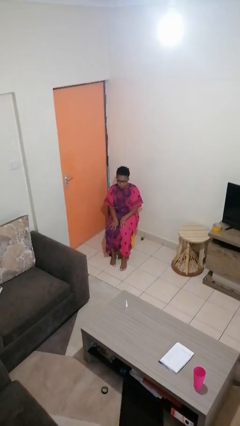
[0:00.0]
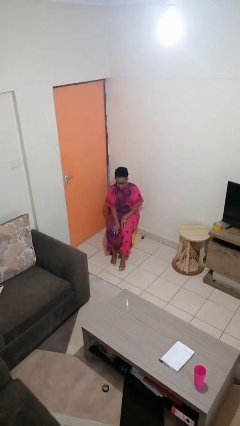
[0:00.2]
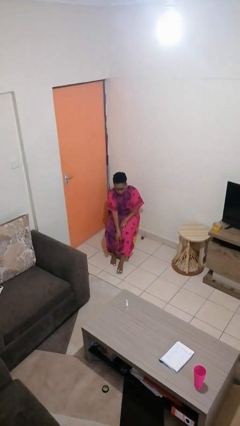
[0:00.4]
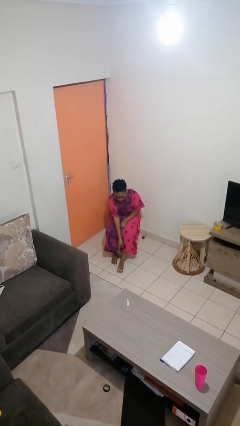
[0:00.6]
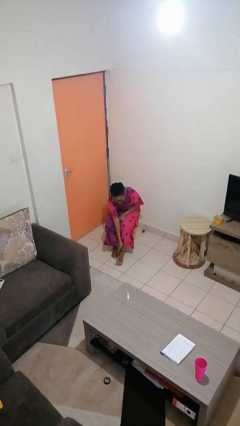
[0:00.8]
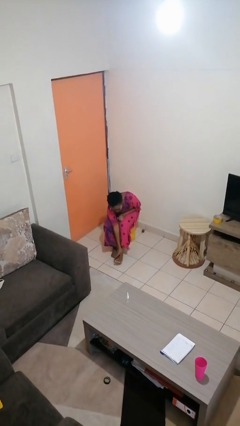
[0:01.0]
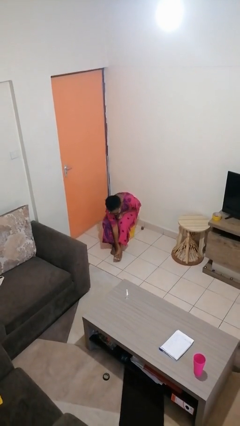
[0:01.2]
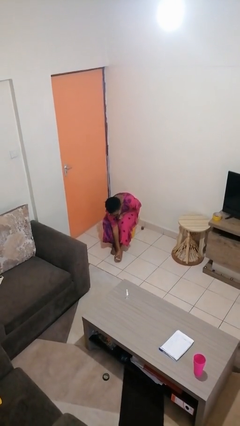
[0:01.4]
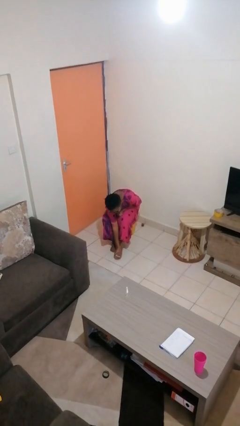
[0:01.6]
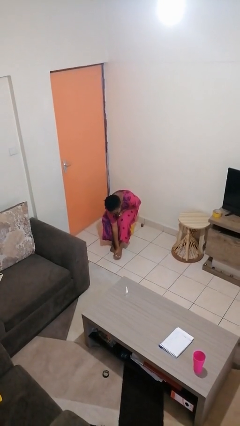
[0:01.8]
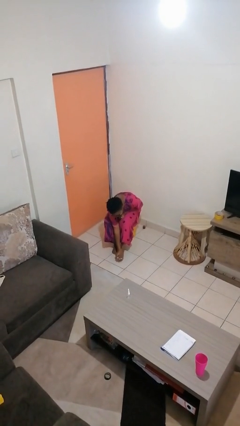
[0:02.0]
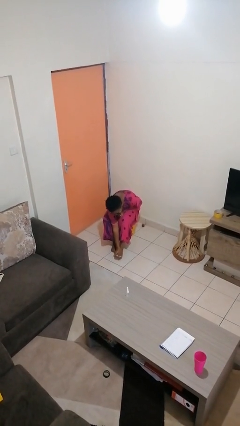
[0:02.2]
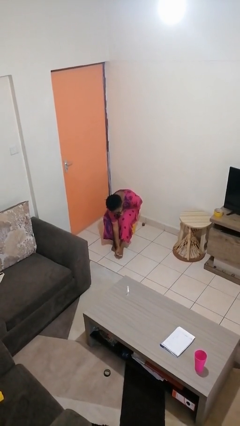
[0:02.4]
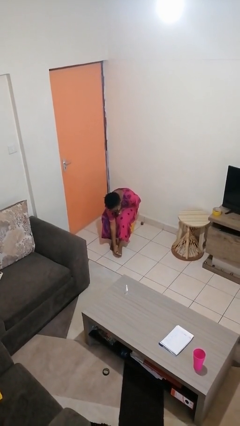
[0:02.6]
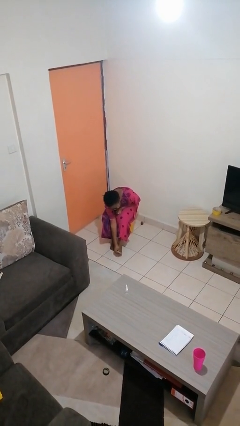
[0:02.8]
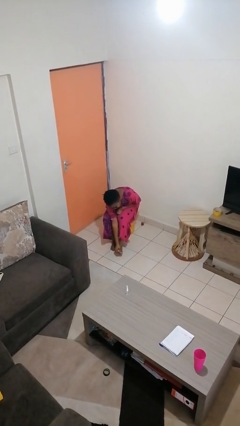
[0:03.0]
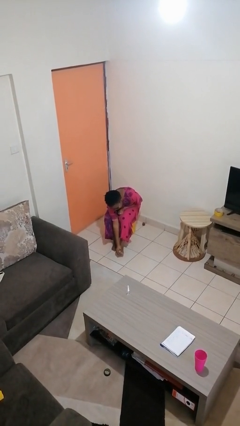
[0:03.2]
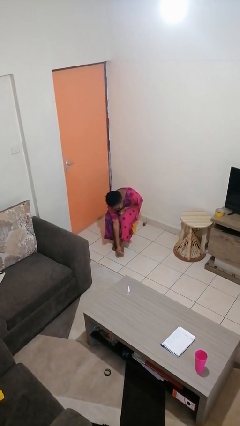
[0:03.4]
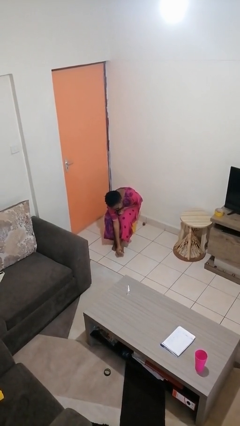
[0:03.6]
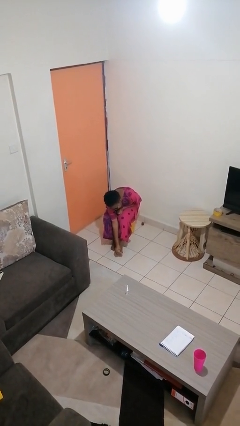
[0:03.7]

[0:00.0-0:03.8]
person rubs foot

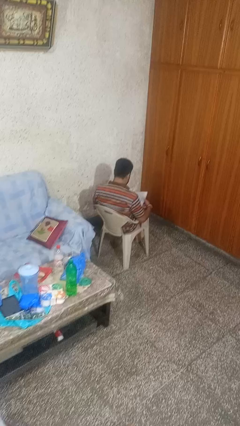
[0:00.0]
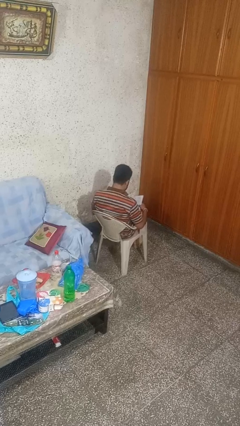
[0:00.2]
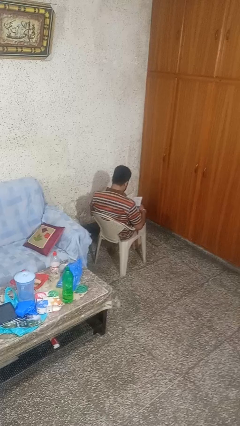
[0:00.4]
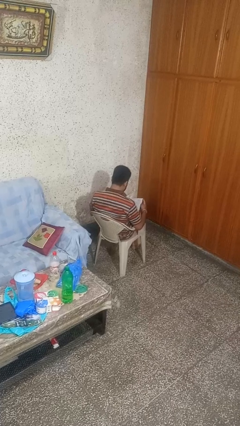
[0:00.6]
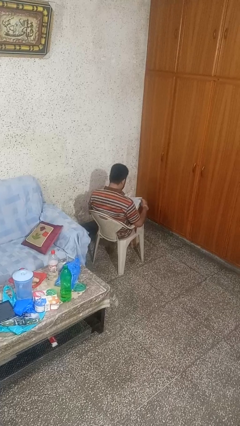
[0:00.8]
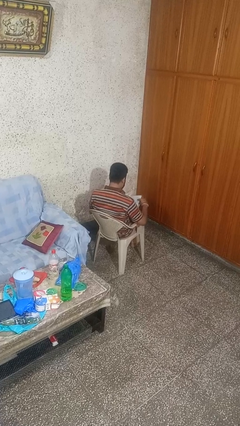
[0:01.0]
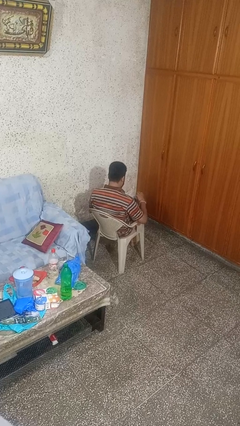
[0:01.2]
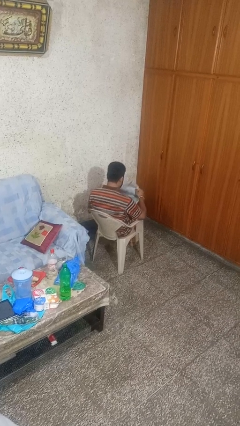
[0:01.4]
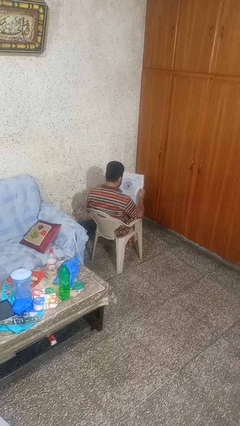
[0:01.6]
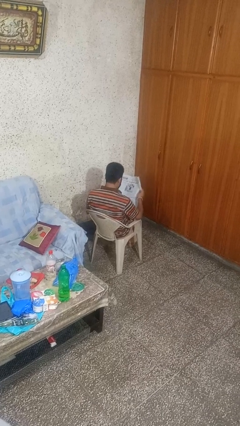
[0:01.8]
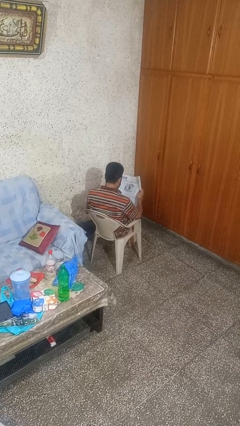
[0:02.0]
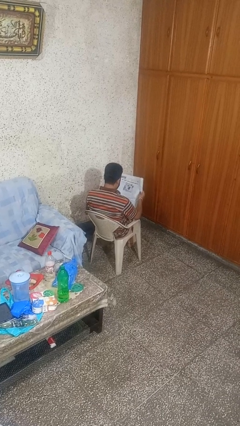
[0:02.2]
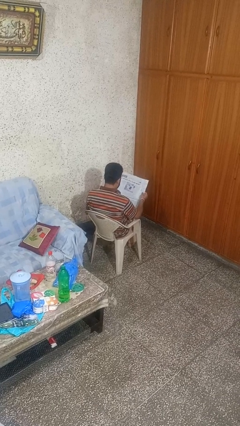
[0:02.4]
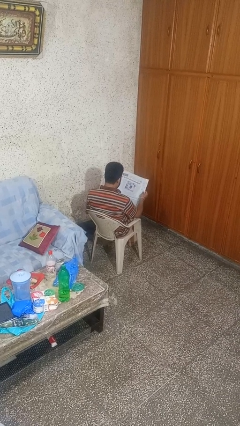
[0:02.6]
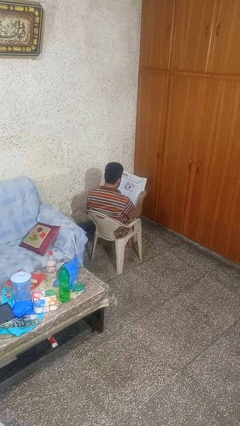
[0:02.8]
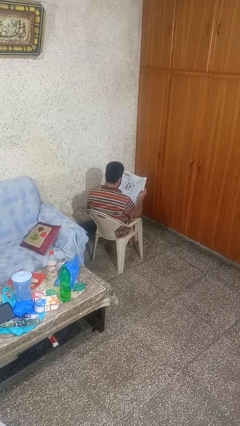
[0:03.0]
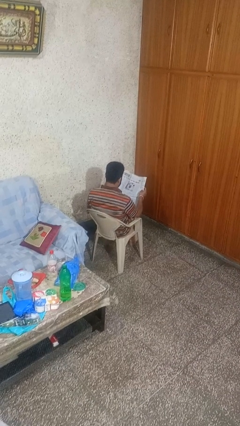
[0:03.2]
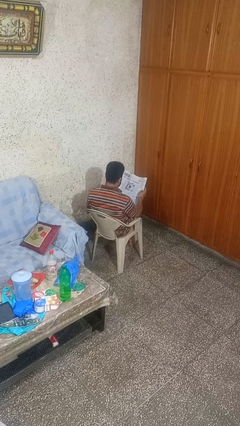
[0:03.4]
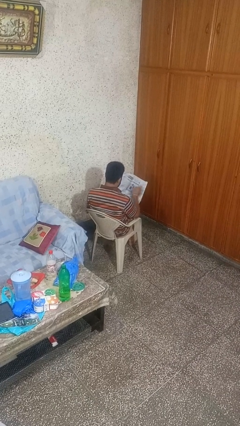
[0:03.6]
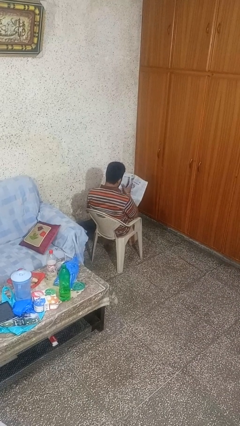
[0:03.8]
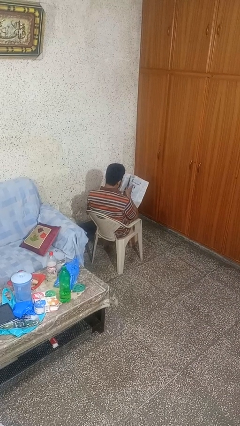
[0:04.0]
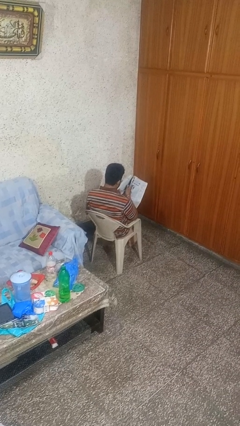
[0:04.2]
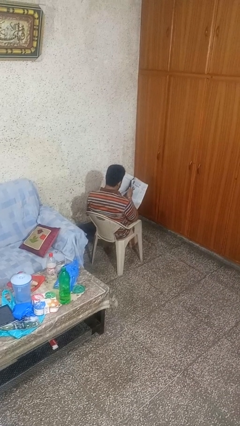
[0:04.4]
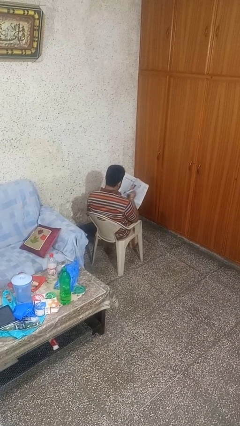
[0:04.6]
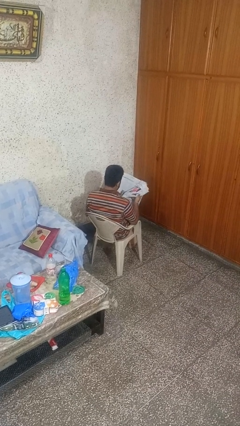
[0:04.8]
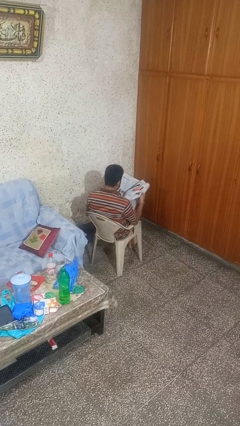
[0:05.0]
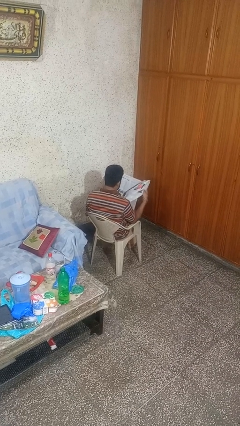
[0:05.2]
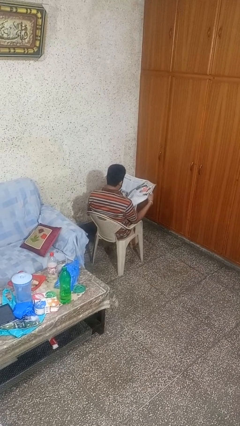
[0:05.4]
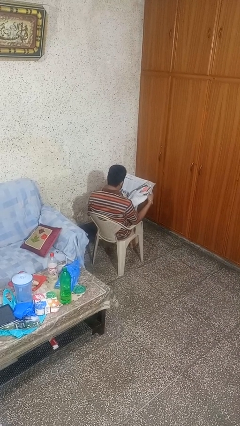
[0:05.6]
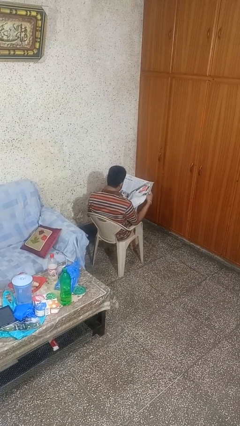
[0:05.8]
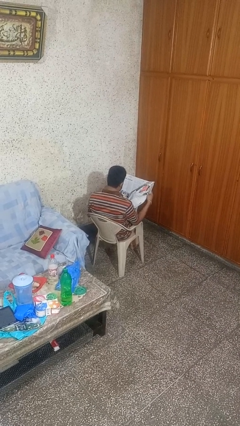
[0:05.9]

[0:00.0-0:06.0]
person reads newspaper

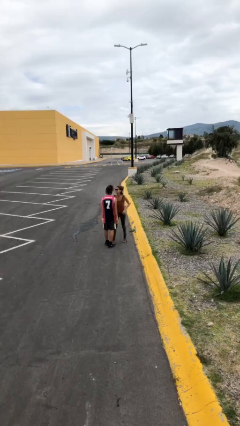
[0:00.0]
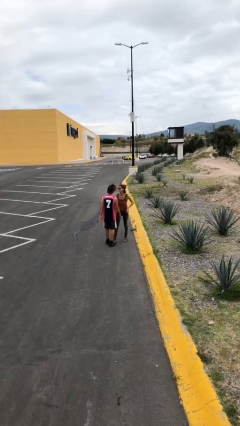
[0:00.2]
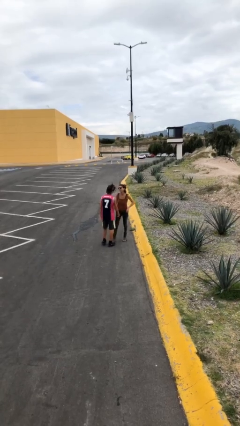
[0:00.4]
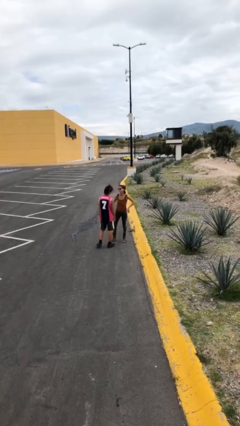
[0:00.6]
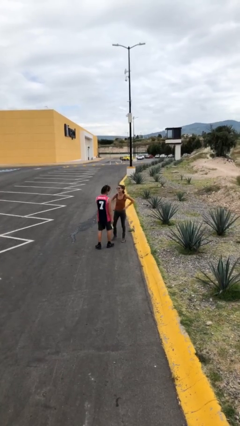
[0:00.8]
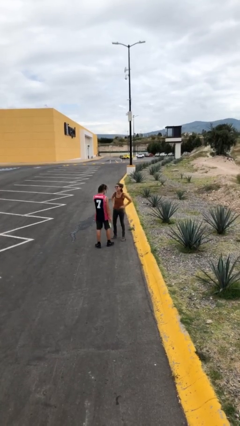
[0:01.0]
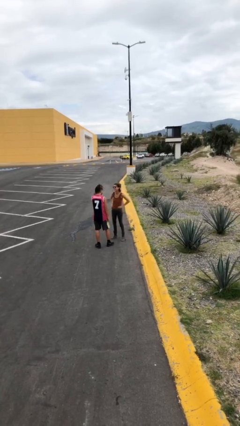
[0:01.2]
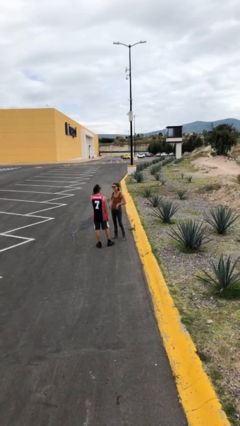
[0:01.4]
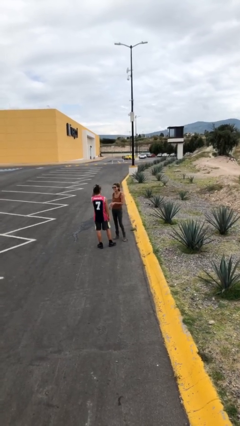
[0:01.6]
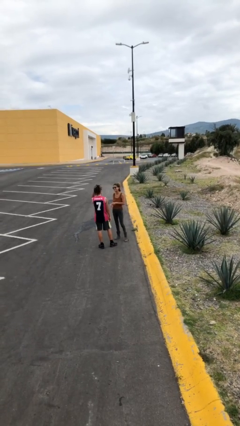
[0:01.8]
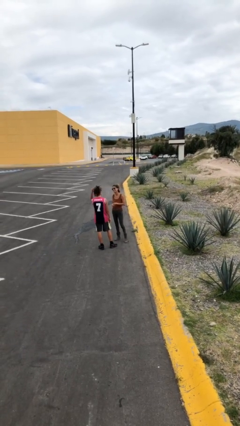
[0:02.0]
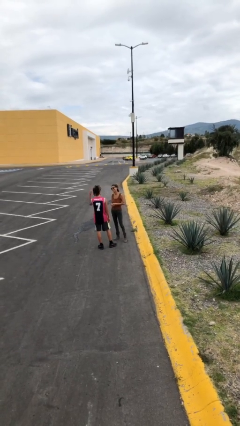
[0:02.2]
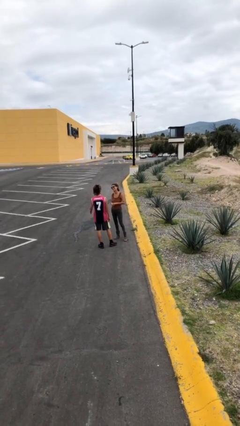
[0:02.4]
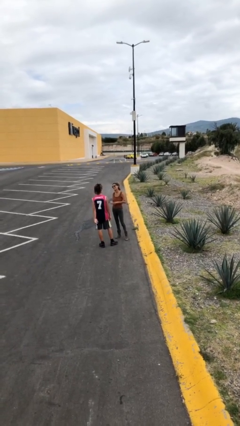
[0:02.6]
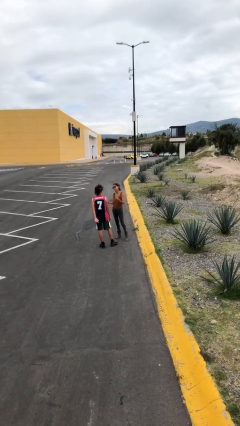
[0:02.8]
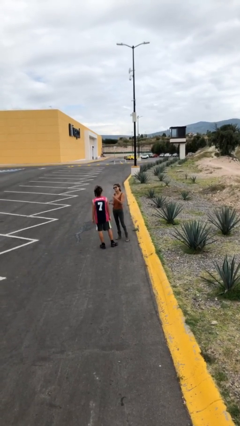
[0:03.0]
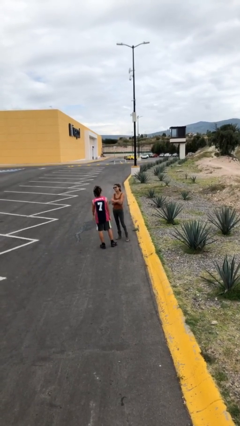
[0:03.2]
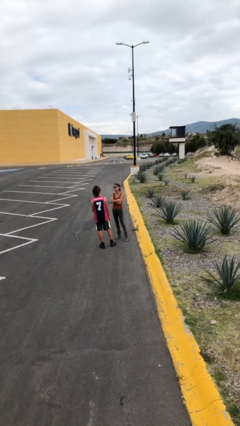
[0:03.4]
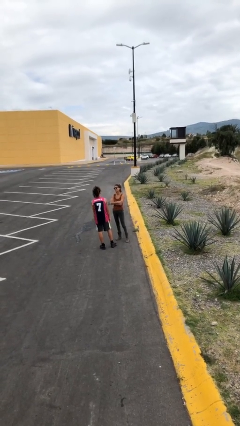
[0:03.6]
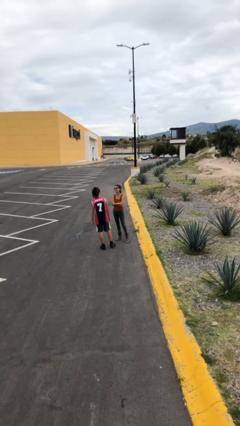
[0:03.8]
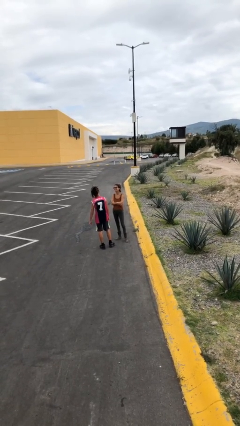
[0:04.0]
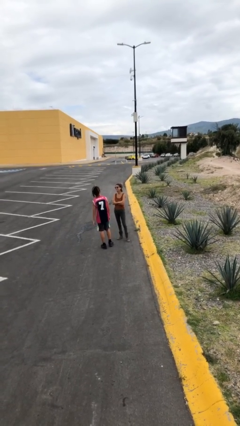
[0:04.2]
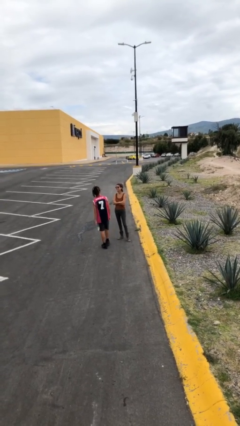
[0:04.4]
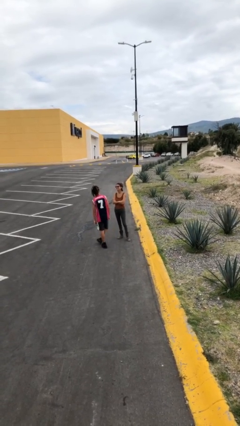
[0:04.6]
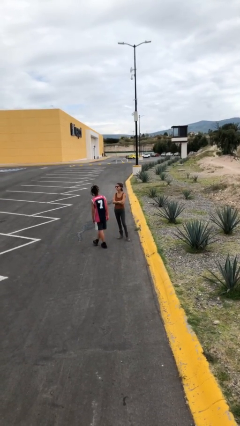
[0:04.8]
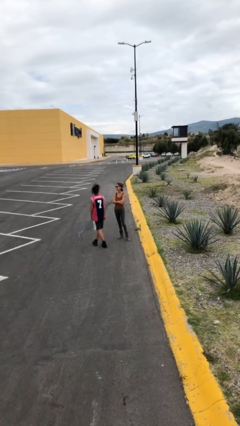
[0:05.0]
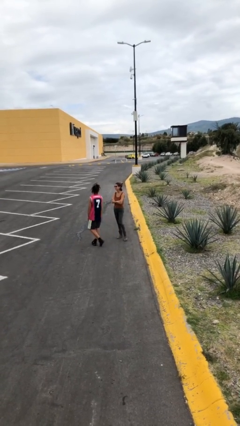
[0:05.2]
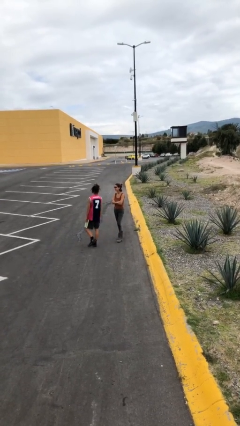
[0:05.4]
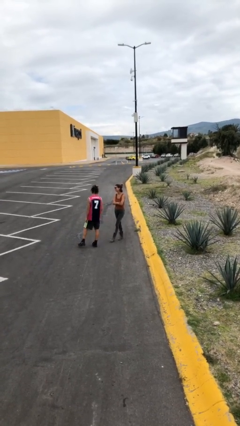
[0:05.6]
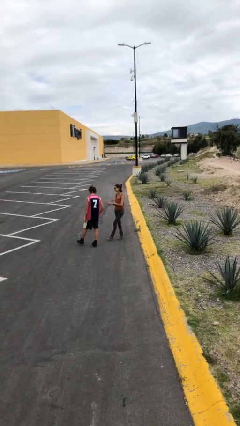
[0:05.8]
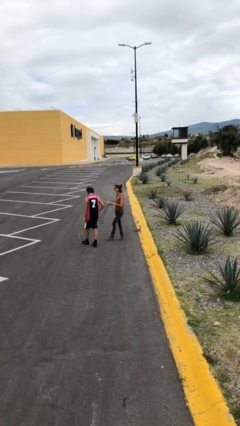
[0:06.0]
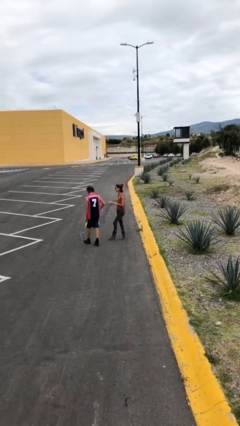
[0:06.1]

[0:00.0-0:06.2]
person talks to person

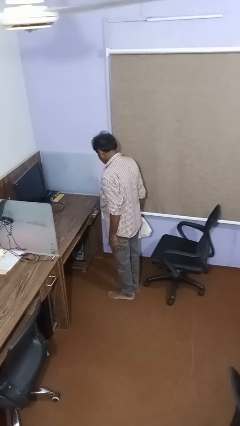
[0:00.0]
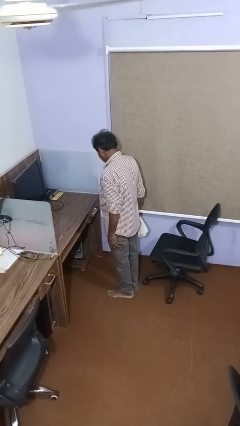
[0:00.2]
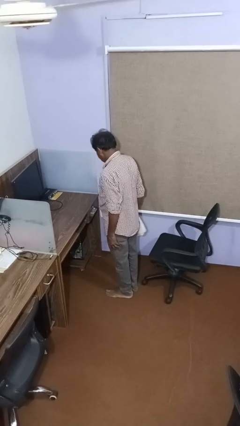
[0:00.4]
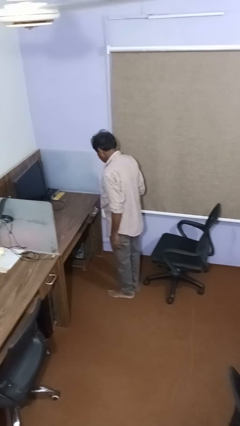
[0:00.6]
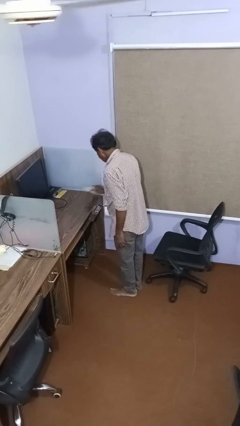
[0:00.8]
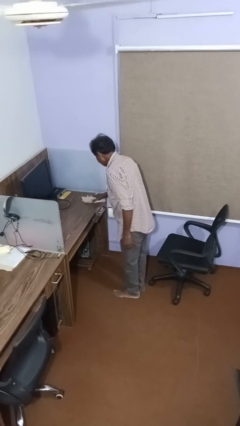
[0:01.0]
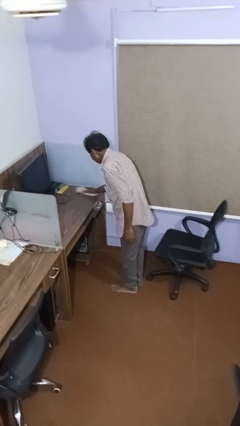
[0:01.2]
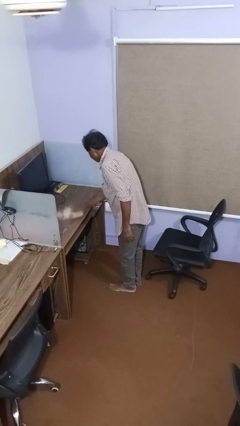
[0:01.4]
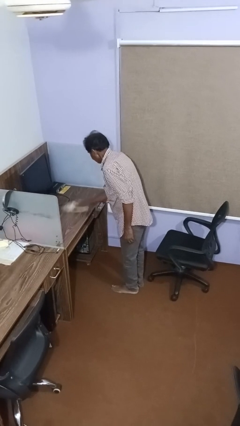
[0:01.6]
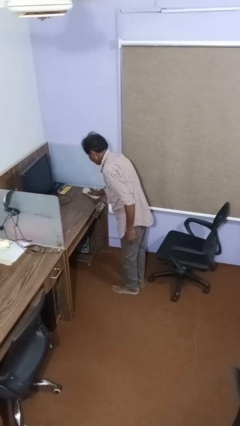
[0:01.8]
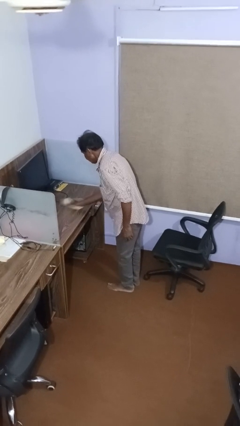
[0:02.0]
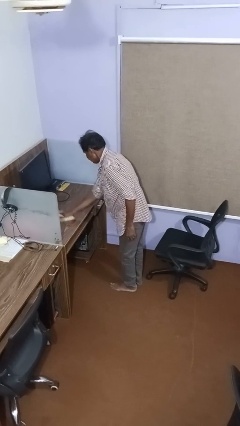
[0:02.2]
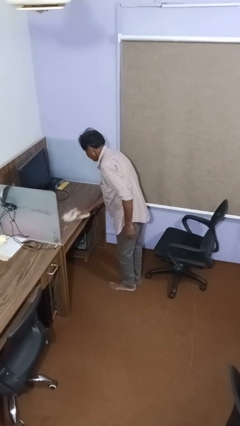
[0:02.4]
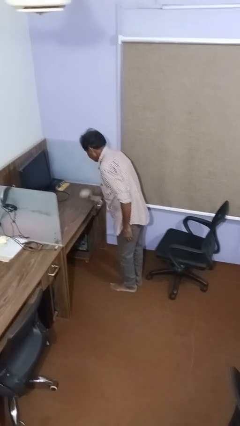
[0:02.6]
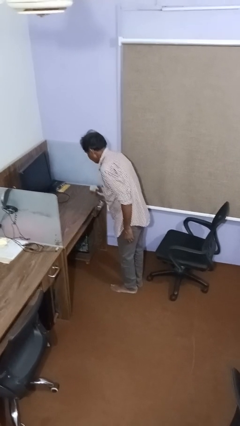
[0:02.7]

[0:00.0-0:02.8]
person dusts furniture
